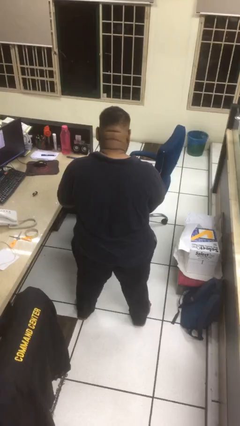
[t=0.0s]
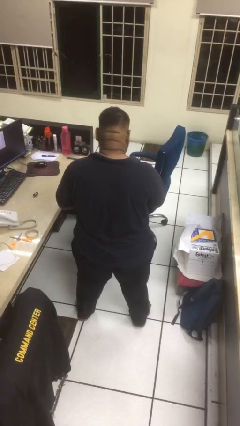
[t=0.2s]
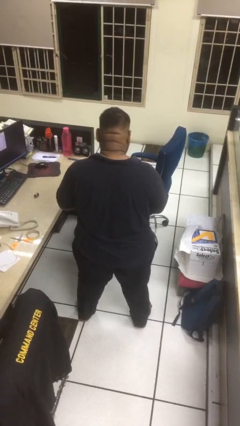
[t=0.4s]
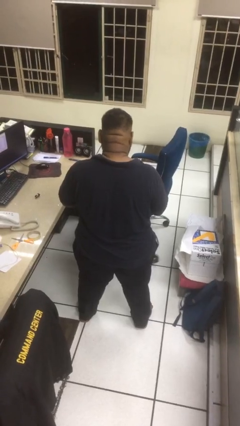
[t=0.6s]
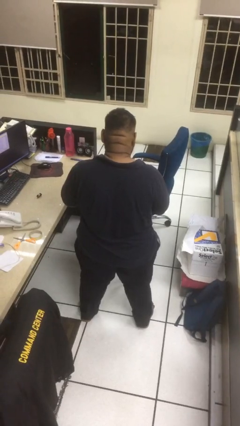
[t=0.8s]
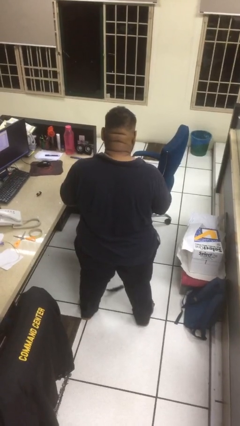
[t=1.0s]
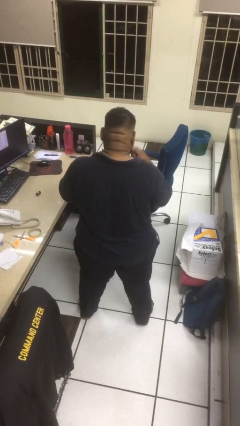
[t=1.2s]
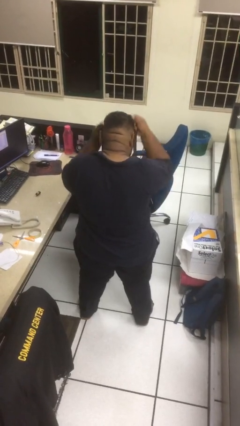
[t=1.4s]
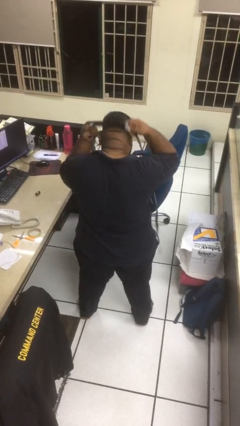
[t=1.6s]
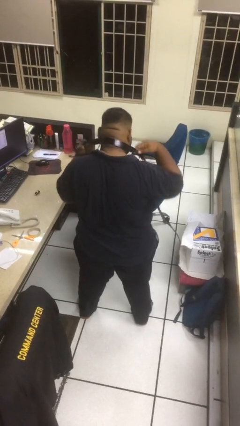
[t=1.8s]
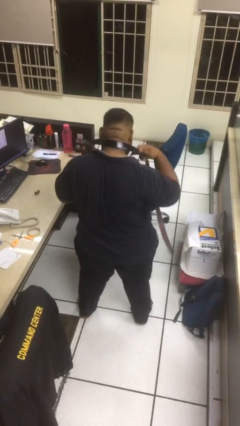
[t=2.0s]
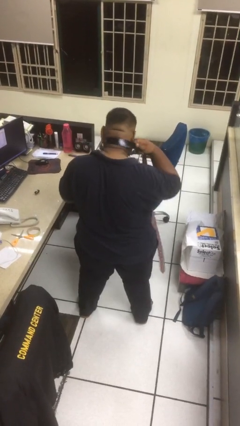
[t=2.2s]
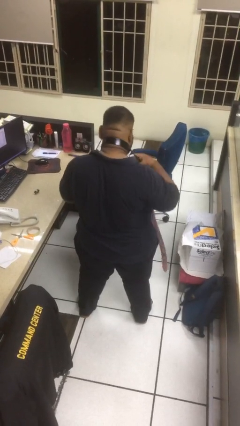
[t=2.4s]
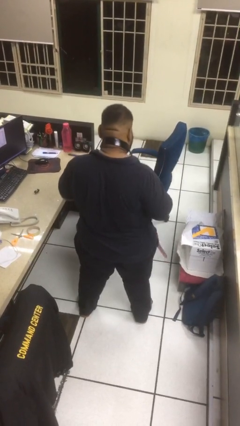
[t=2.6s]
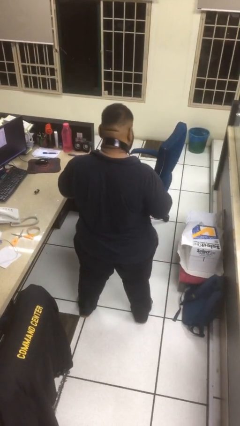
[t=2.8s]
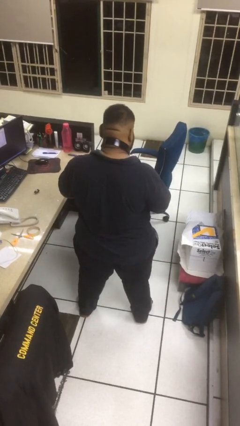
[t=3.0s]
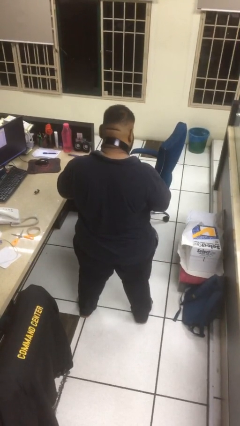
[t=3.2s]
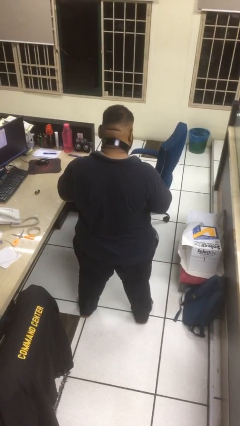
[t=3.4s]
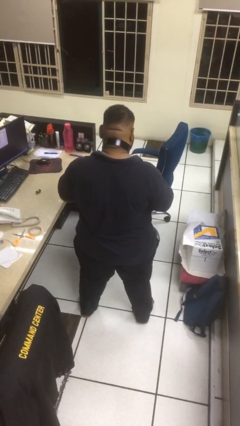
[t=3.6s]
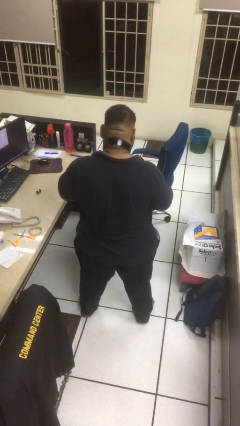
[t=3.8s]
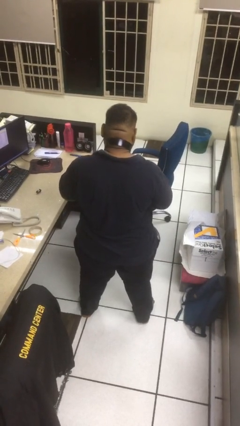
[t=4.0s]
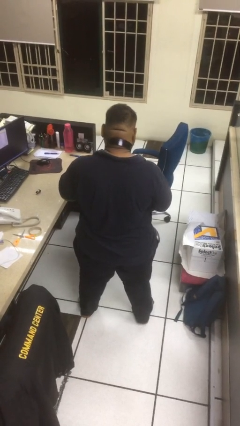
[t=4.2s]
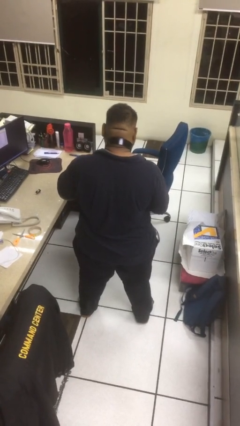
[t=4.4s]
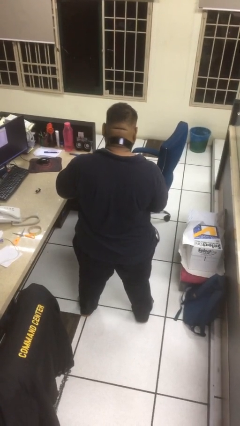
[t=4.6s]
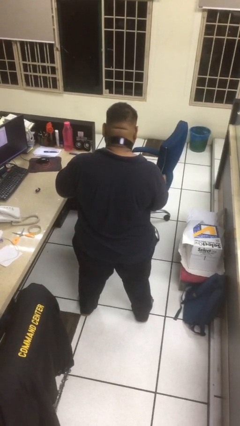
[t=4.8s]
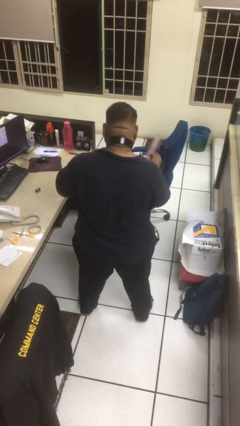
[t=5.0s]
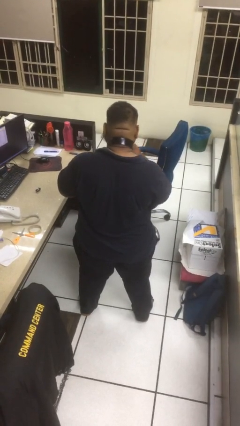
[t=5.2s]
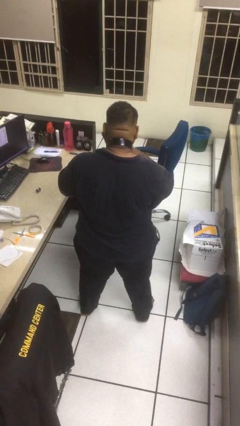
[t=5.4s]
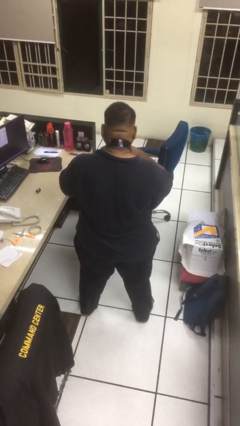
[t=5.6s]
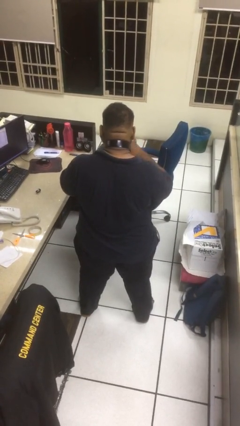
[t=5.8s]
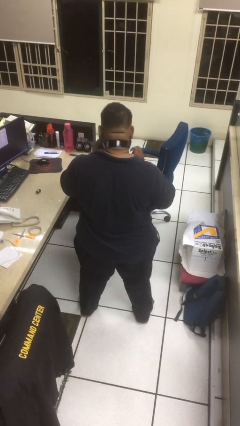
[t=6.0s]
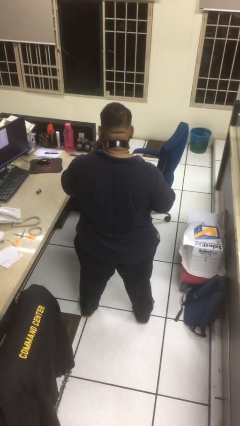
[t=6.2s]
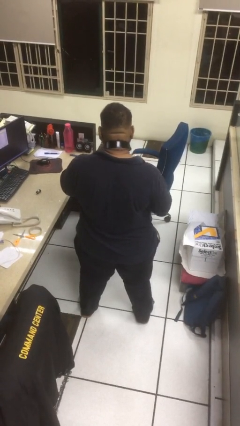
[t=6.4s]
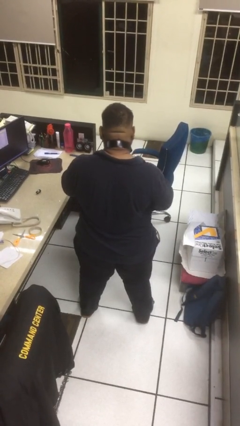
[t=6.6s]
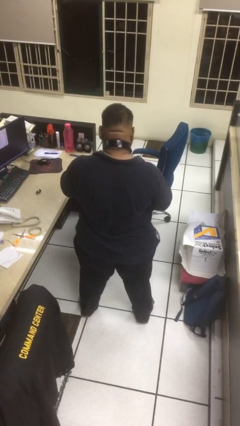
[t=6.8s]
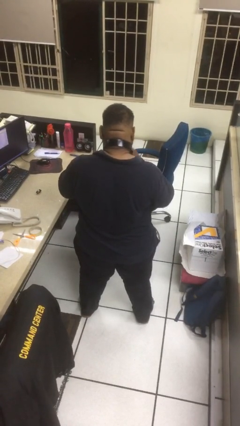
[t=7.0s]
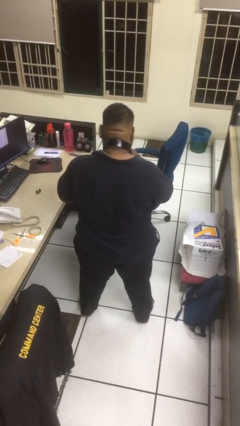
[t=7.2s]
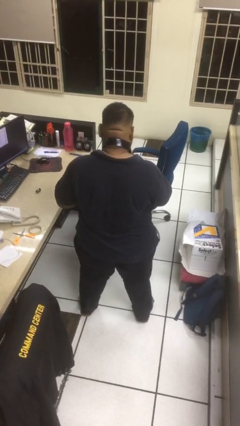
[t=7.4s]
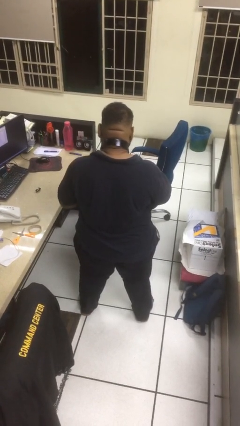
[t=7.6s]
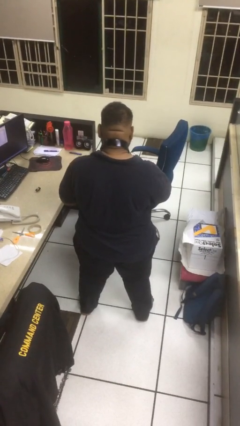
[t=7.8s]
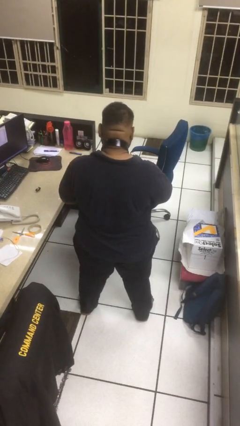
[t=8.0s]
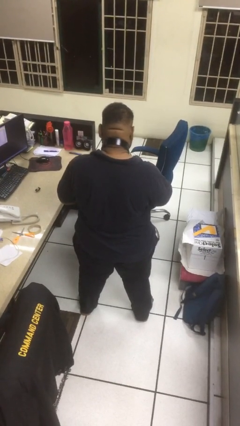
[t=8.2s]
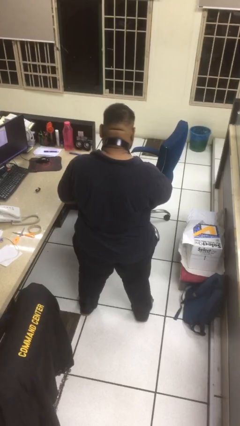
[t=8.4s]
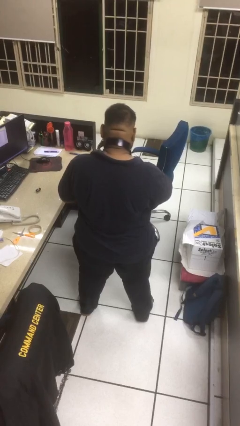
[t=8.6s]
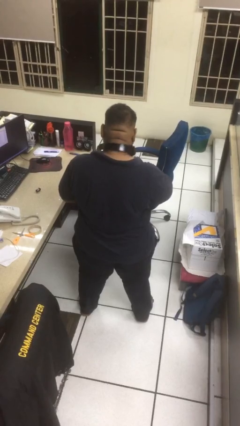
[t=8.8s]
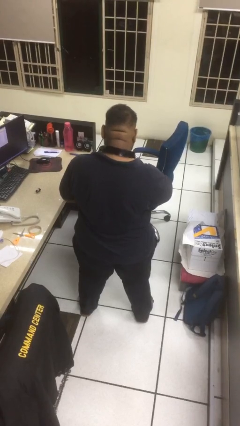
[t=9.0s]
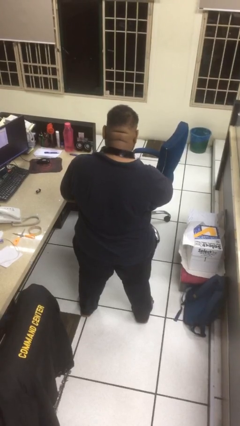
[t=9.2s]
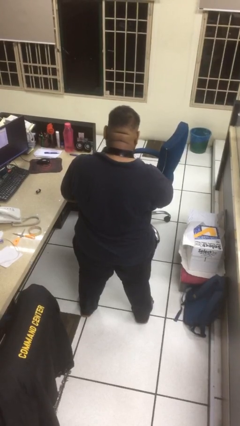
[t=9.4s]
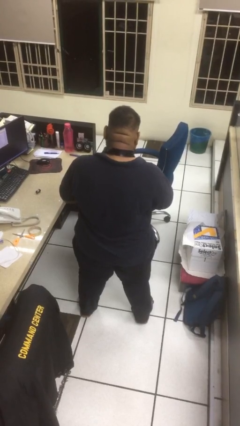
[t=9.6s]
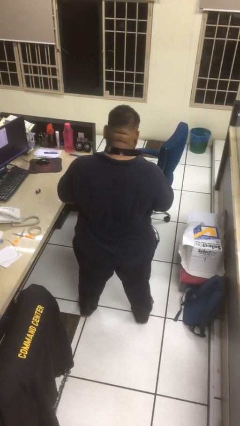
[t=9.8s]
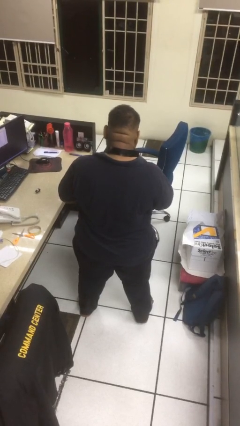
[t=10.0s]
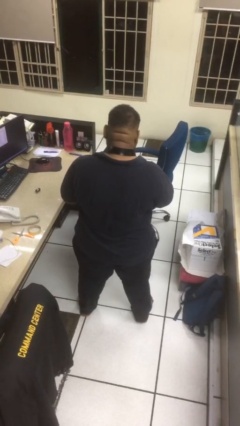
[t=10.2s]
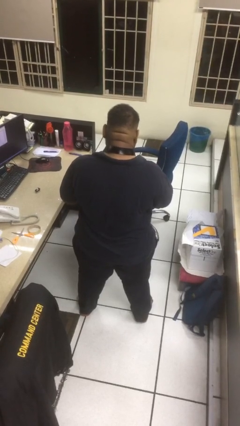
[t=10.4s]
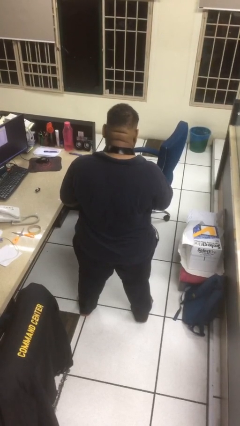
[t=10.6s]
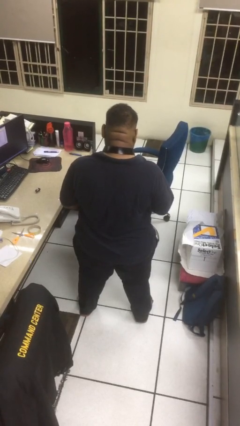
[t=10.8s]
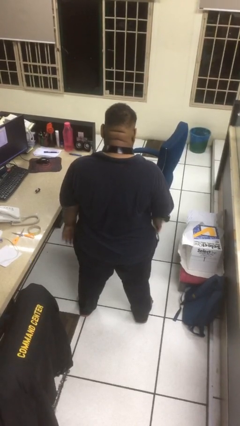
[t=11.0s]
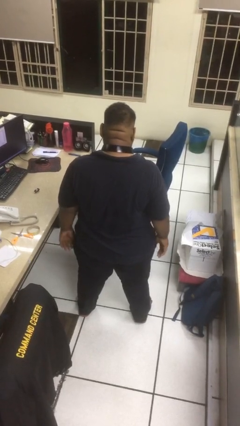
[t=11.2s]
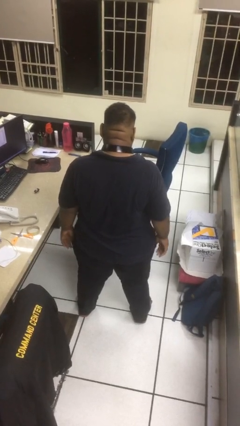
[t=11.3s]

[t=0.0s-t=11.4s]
person puts on necktie

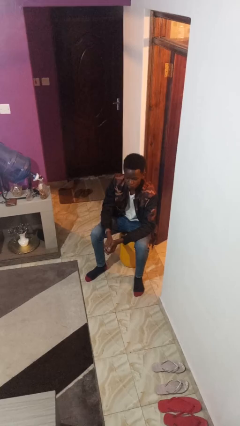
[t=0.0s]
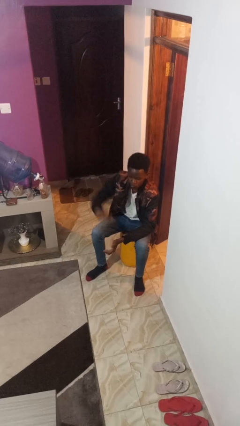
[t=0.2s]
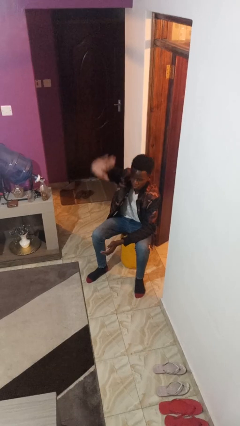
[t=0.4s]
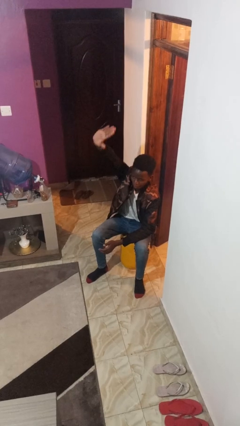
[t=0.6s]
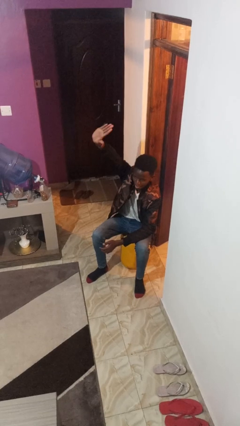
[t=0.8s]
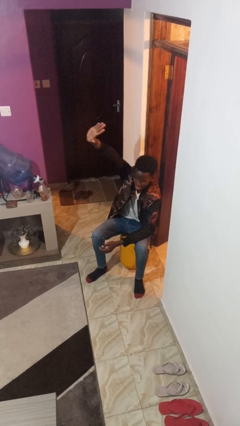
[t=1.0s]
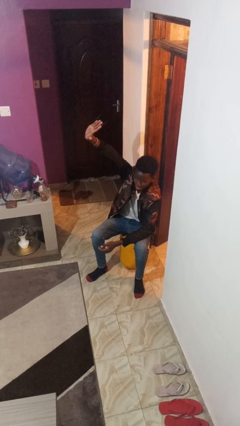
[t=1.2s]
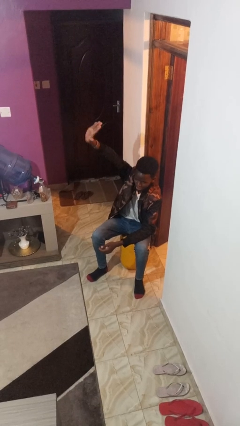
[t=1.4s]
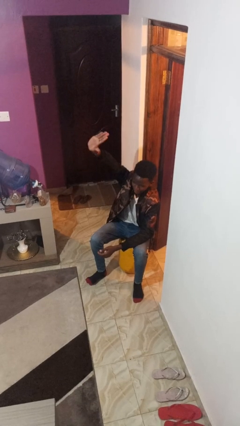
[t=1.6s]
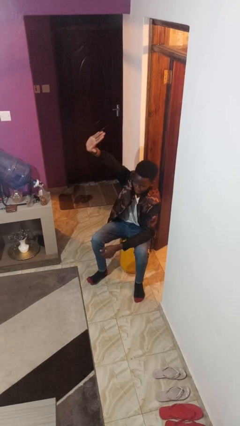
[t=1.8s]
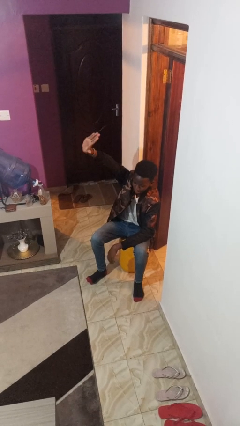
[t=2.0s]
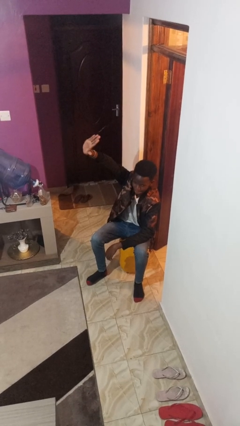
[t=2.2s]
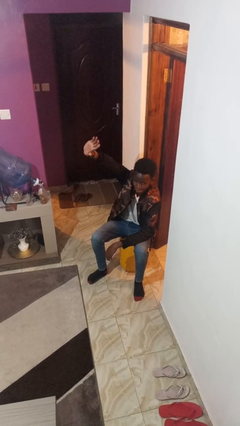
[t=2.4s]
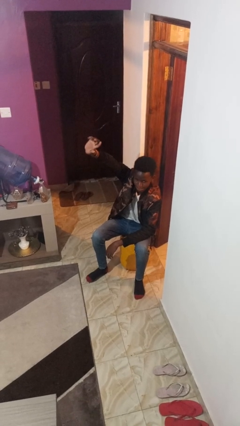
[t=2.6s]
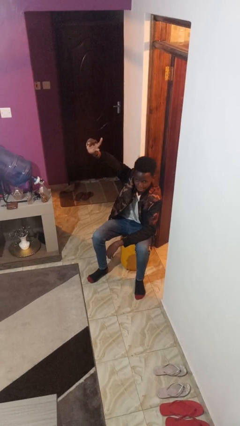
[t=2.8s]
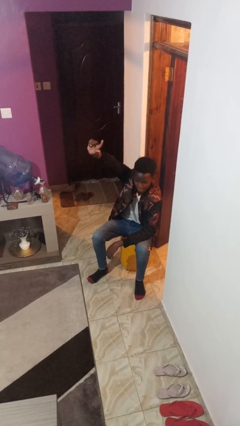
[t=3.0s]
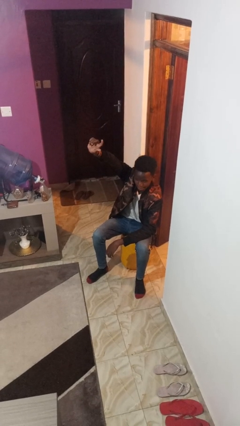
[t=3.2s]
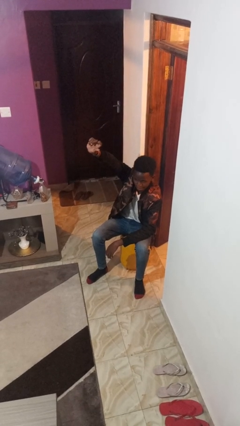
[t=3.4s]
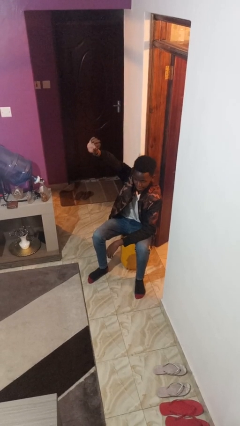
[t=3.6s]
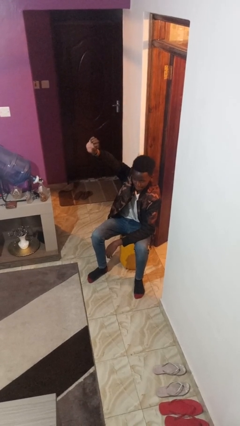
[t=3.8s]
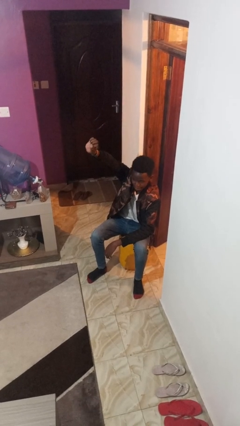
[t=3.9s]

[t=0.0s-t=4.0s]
person gestures raise hand

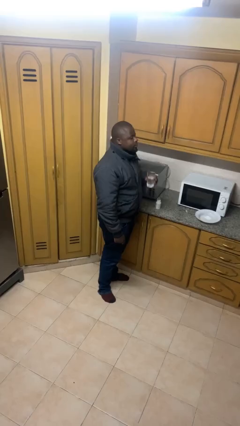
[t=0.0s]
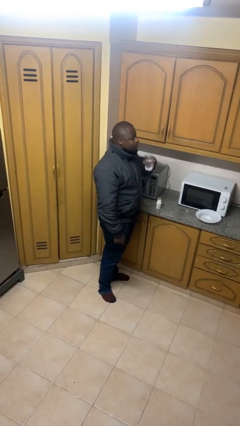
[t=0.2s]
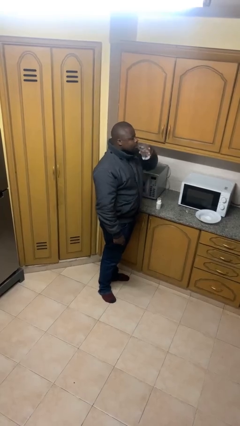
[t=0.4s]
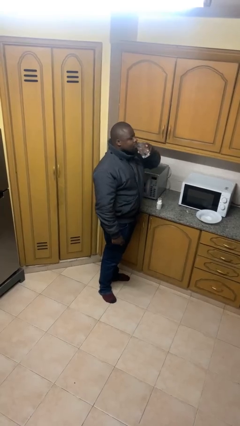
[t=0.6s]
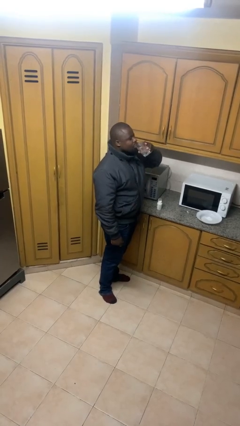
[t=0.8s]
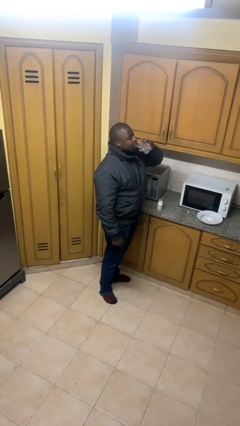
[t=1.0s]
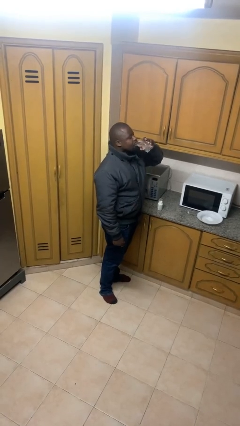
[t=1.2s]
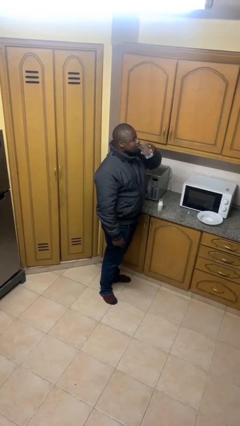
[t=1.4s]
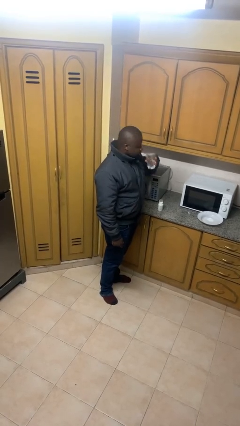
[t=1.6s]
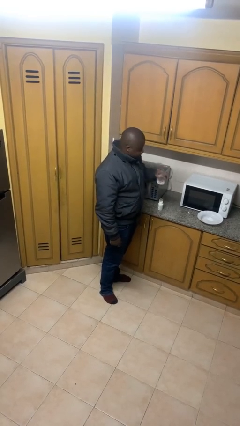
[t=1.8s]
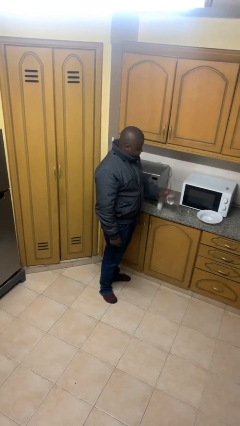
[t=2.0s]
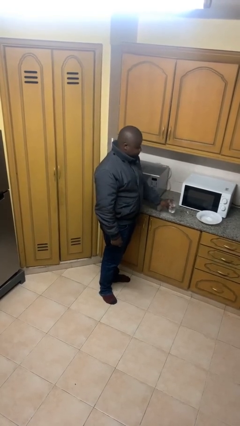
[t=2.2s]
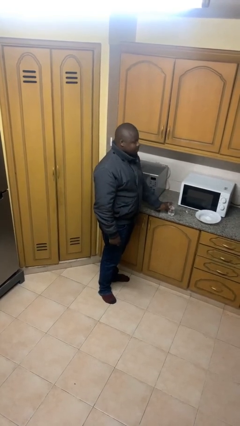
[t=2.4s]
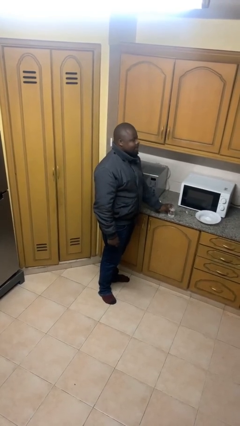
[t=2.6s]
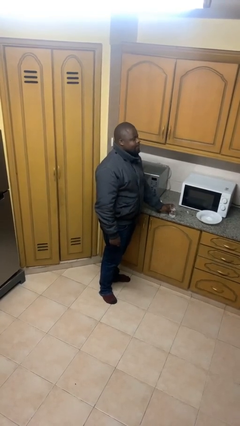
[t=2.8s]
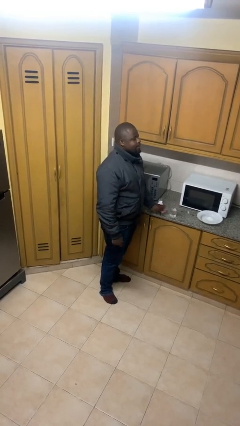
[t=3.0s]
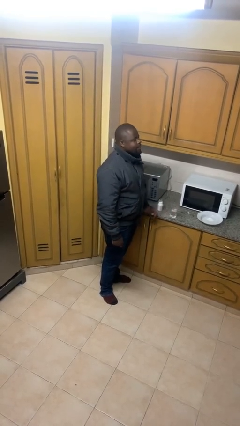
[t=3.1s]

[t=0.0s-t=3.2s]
person drinks from cup
